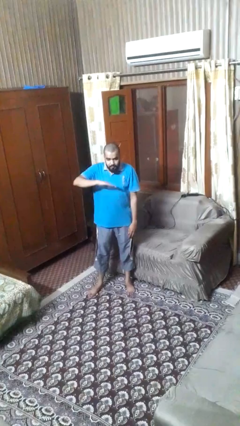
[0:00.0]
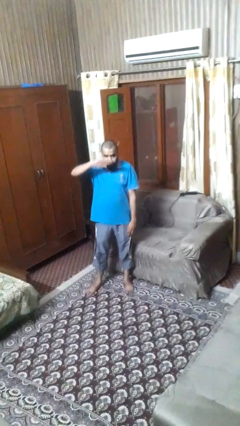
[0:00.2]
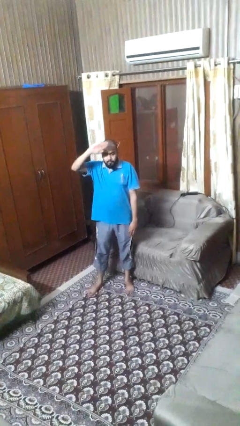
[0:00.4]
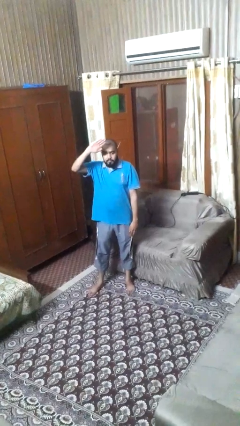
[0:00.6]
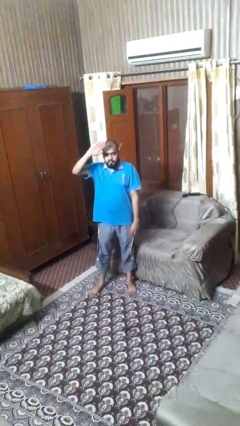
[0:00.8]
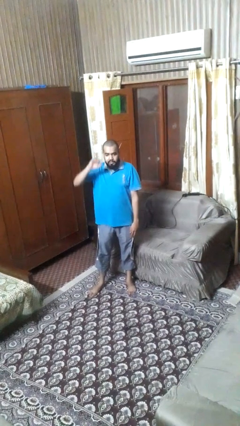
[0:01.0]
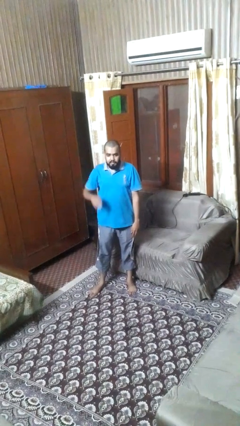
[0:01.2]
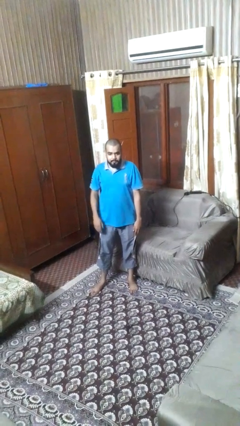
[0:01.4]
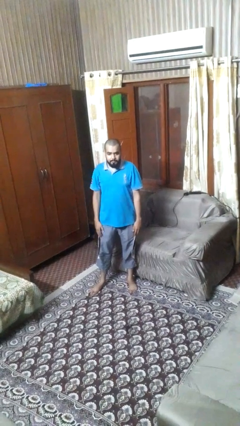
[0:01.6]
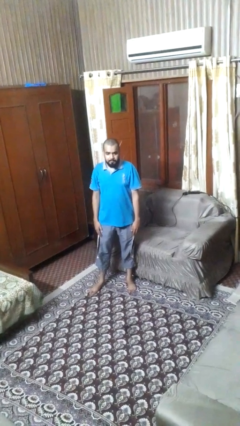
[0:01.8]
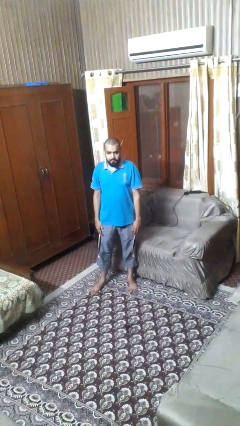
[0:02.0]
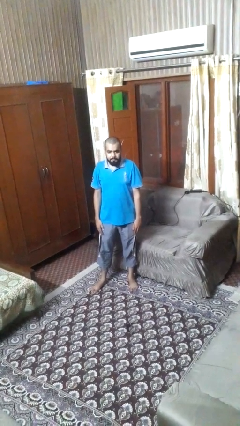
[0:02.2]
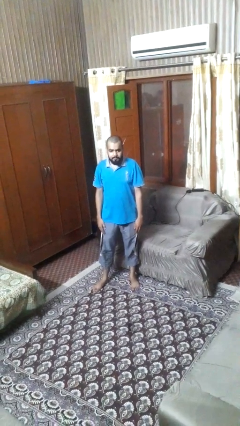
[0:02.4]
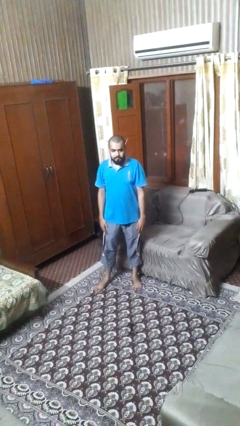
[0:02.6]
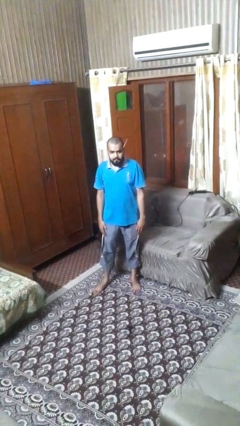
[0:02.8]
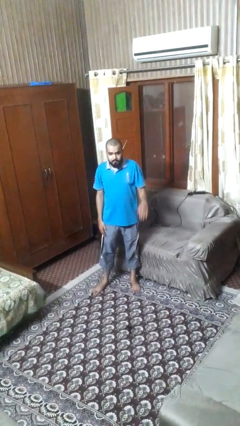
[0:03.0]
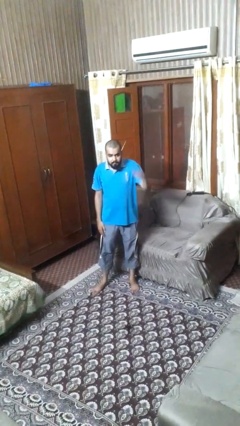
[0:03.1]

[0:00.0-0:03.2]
person gestures swipe up

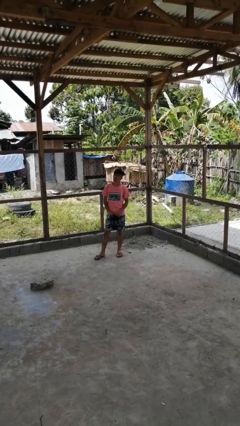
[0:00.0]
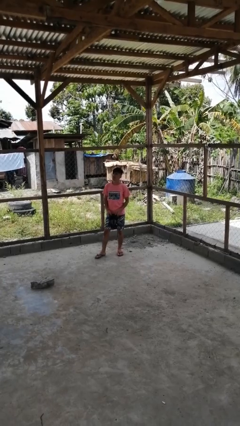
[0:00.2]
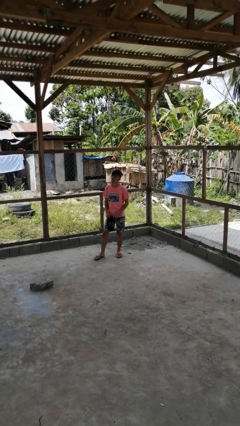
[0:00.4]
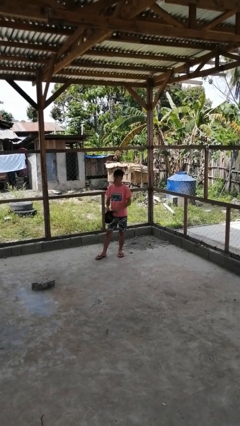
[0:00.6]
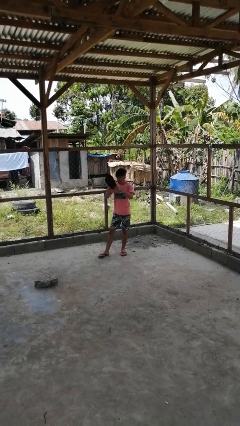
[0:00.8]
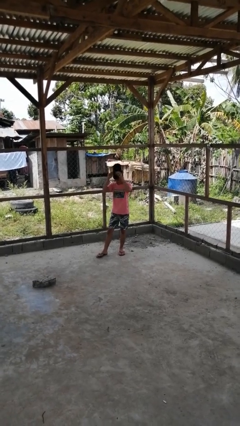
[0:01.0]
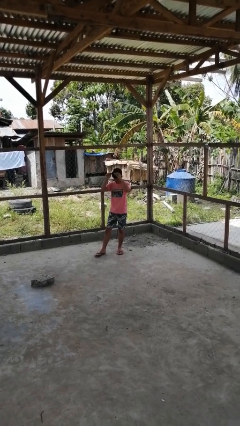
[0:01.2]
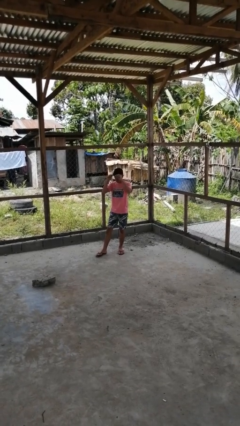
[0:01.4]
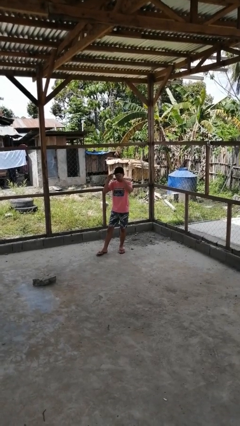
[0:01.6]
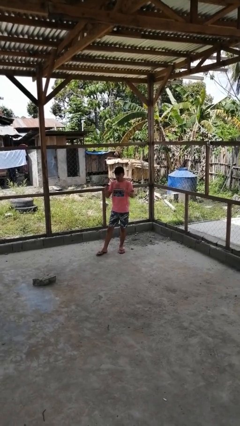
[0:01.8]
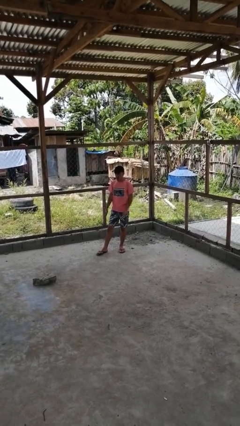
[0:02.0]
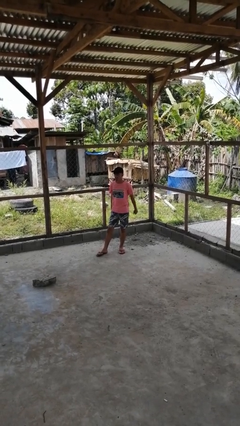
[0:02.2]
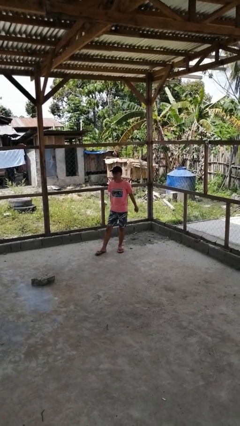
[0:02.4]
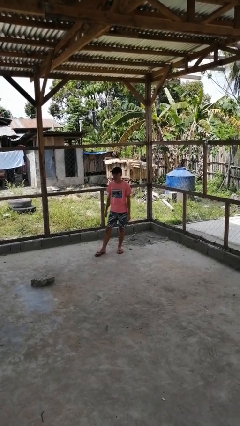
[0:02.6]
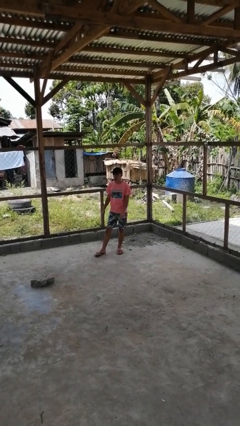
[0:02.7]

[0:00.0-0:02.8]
person puts on hat

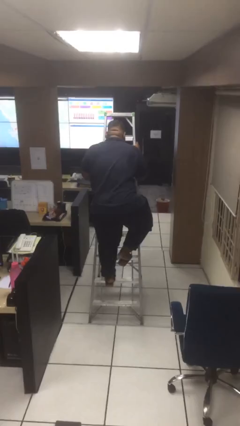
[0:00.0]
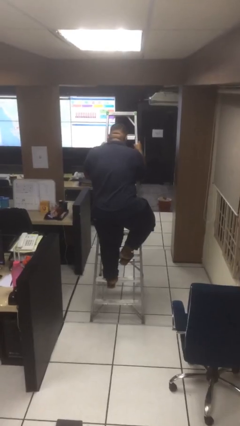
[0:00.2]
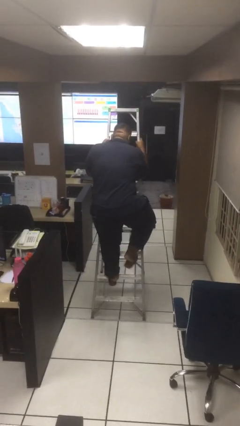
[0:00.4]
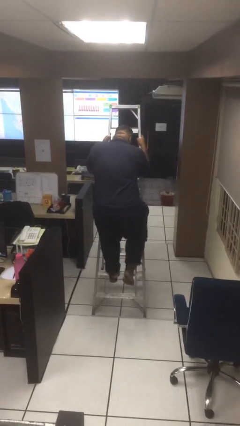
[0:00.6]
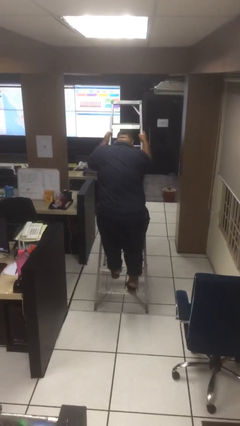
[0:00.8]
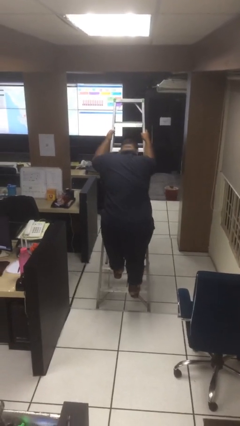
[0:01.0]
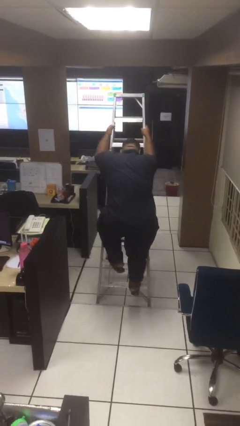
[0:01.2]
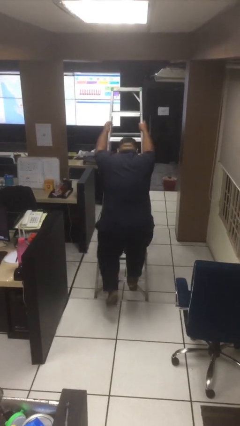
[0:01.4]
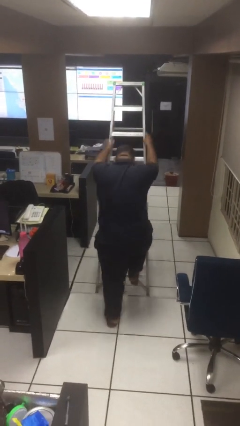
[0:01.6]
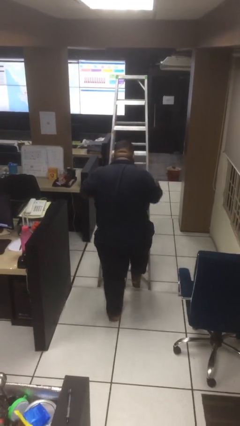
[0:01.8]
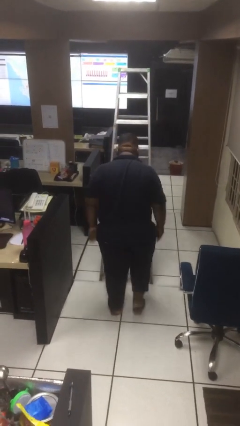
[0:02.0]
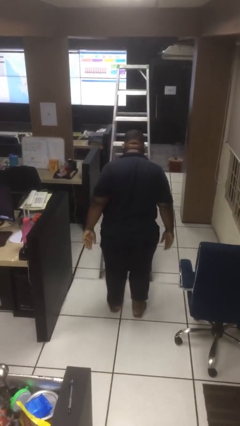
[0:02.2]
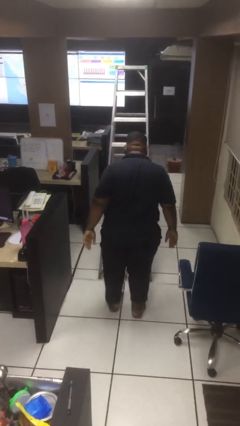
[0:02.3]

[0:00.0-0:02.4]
person climbs down ladder

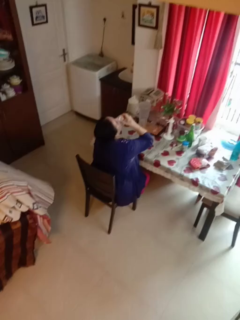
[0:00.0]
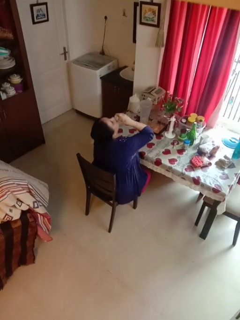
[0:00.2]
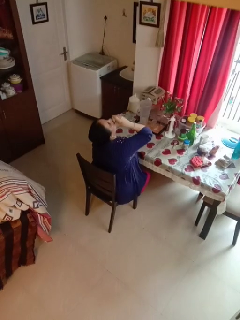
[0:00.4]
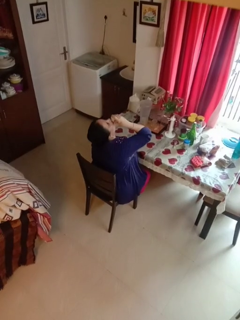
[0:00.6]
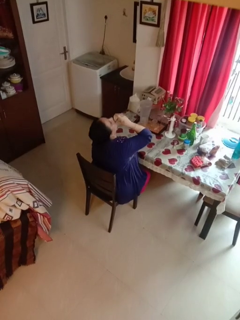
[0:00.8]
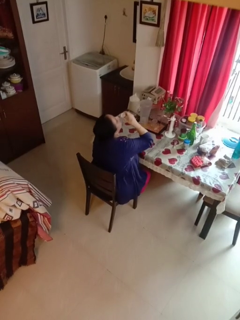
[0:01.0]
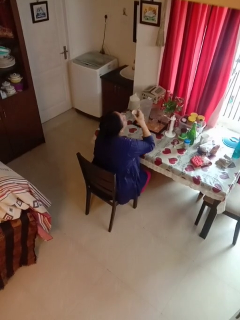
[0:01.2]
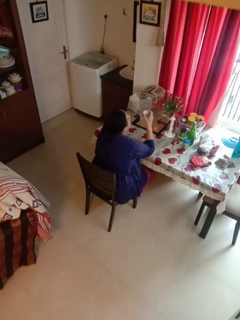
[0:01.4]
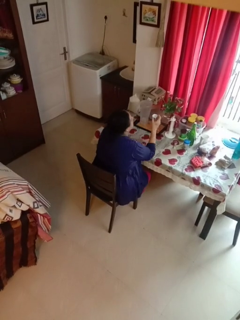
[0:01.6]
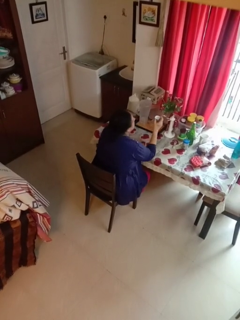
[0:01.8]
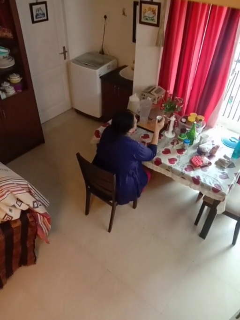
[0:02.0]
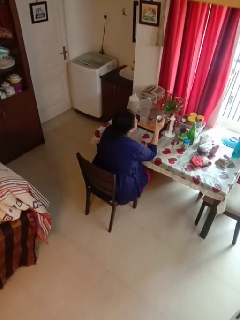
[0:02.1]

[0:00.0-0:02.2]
person drinks from shotglass

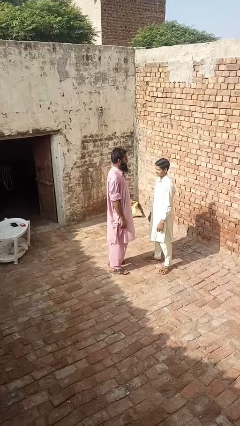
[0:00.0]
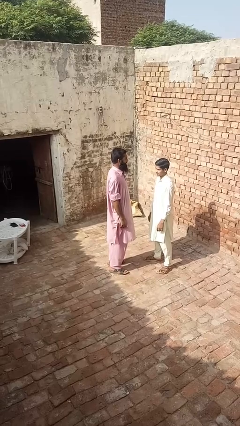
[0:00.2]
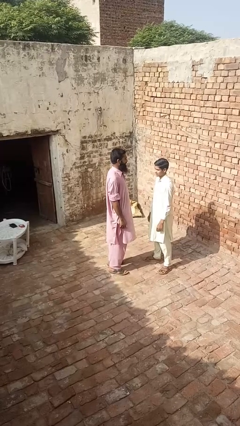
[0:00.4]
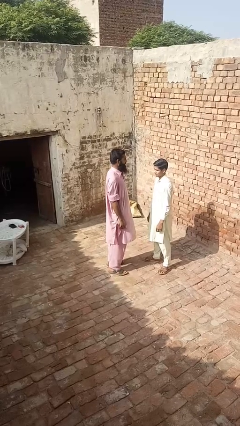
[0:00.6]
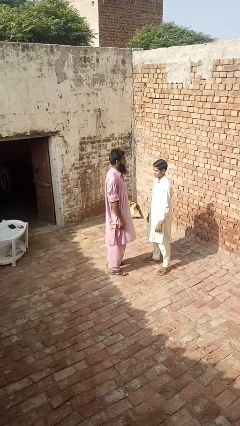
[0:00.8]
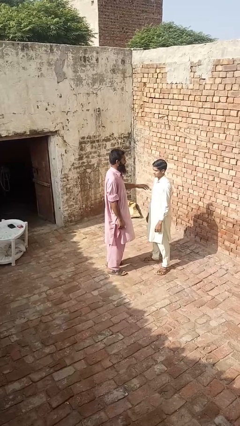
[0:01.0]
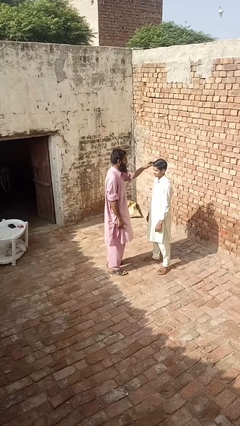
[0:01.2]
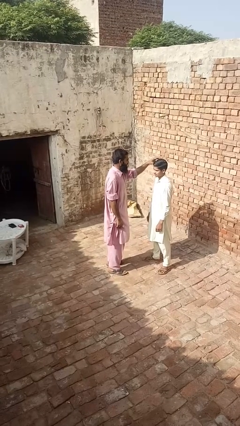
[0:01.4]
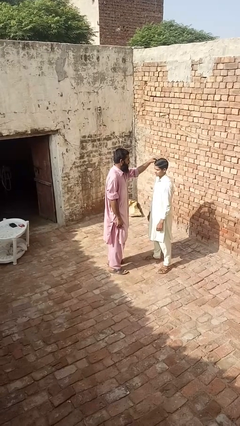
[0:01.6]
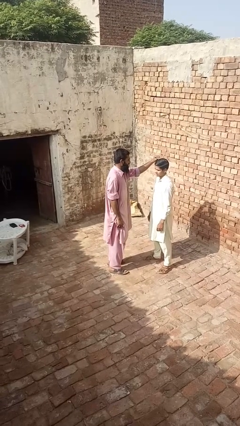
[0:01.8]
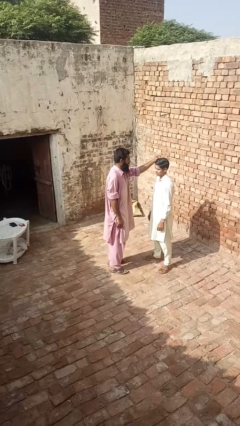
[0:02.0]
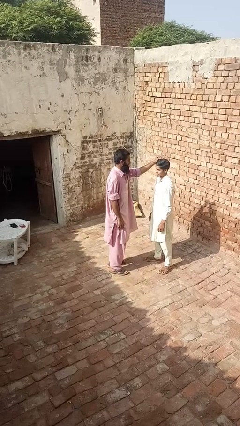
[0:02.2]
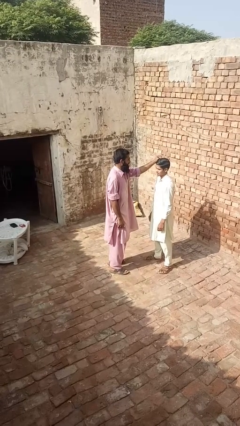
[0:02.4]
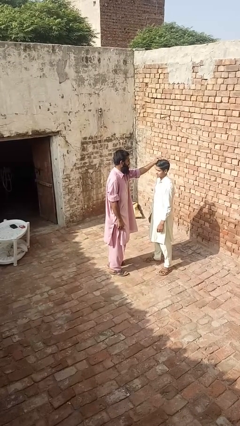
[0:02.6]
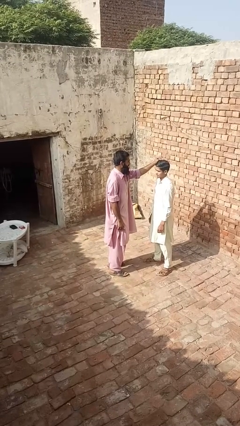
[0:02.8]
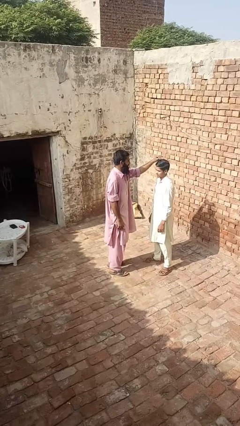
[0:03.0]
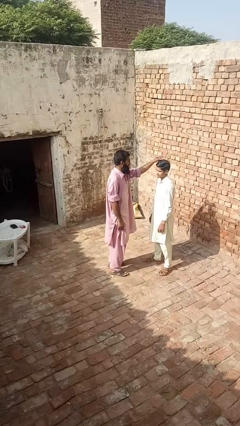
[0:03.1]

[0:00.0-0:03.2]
person grabs person by hair

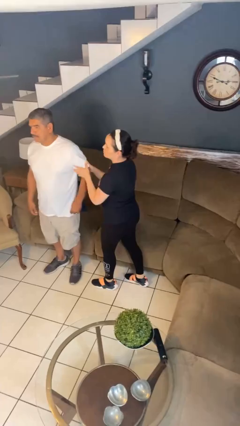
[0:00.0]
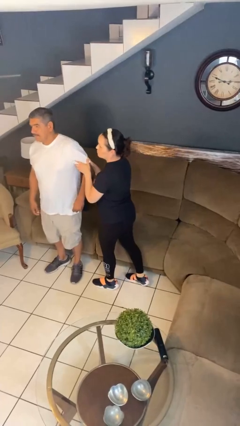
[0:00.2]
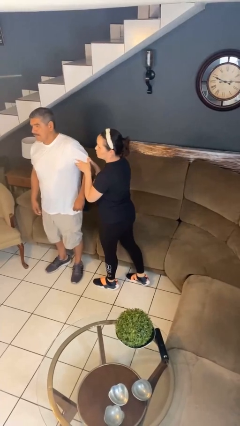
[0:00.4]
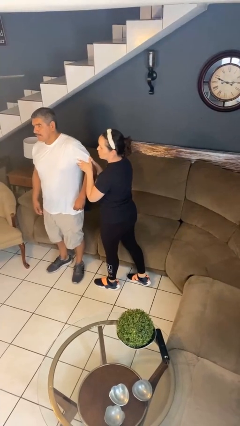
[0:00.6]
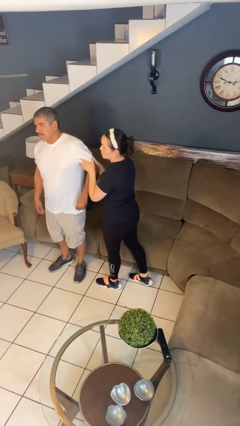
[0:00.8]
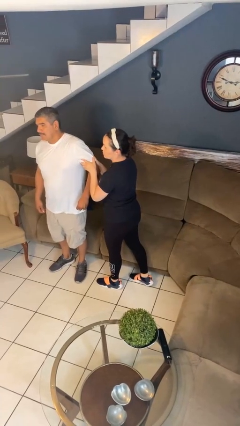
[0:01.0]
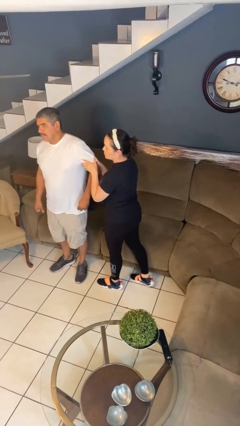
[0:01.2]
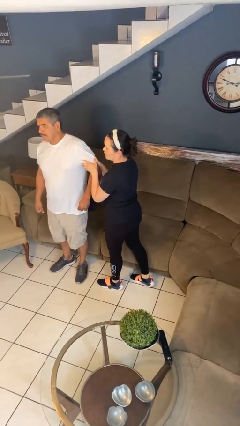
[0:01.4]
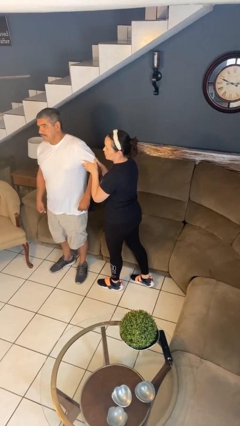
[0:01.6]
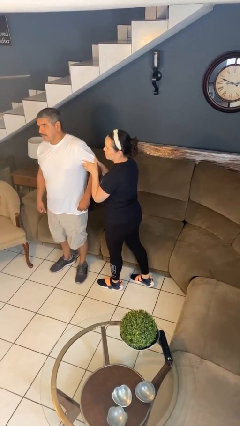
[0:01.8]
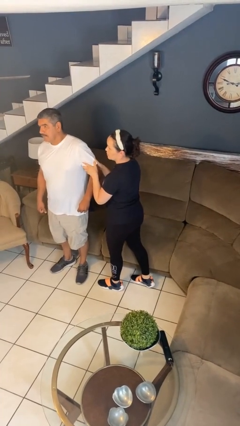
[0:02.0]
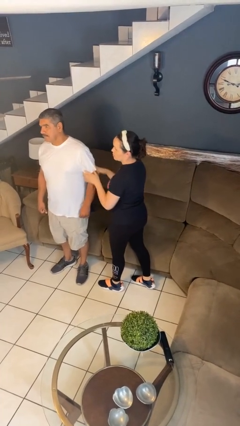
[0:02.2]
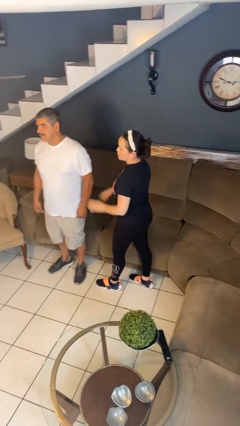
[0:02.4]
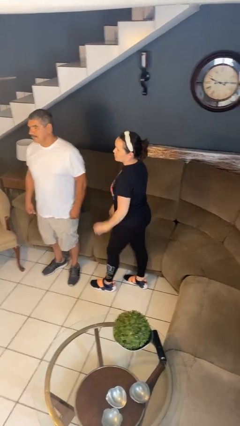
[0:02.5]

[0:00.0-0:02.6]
person grabs person by bicep

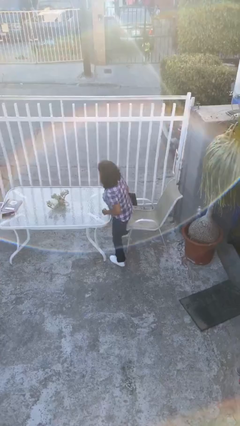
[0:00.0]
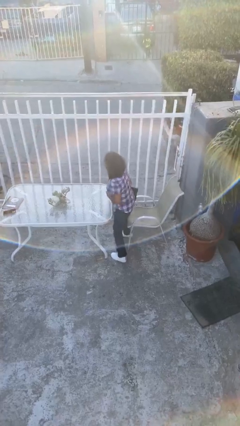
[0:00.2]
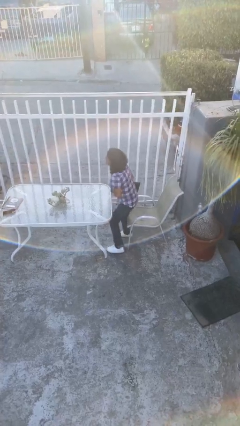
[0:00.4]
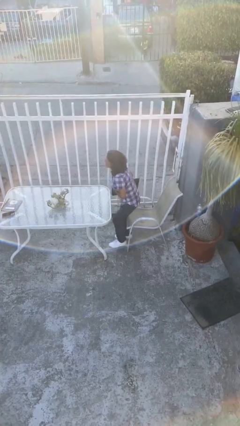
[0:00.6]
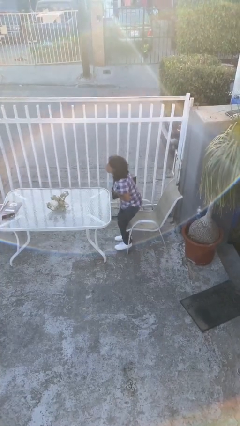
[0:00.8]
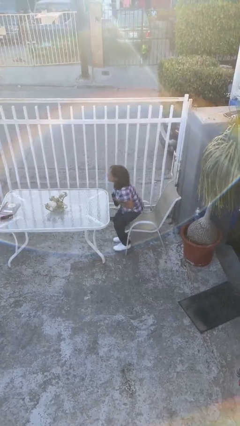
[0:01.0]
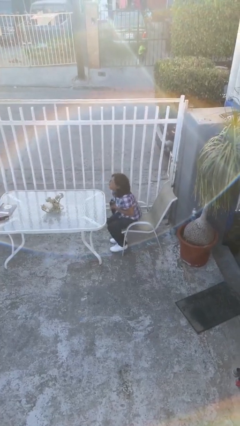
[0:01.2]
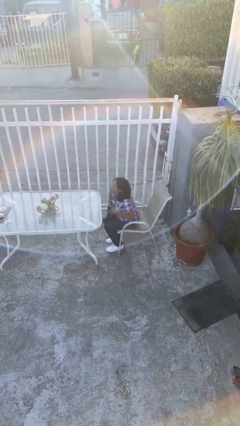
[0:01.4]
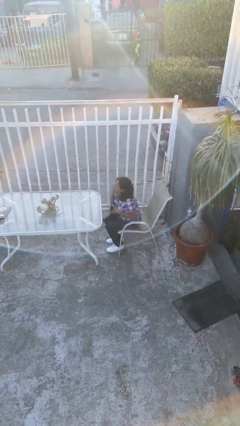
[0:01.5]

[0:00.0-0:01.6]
person sits down
